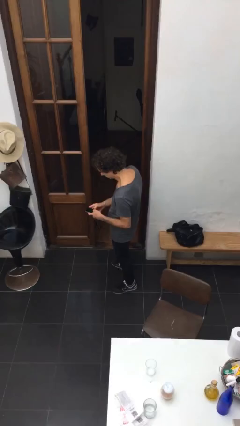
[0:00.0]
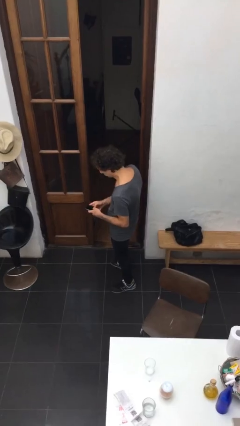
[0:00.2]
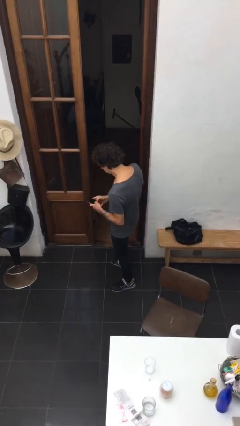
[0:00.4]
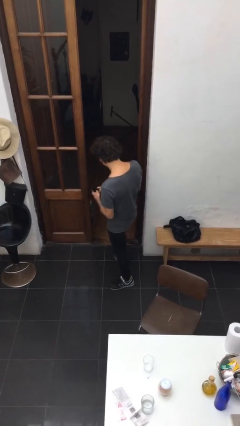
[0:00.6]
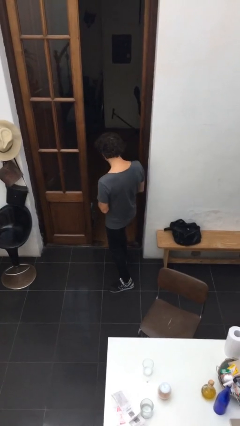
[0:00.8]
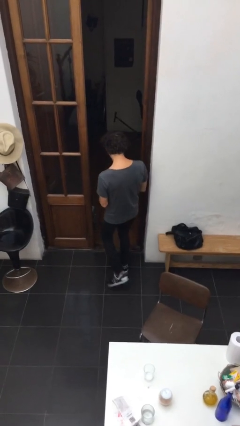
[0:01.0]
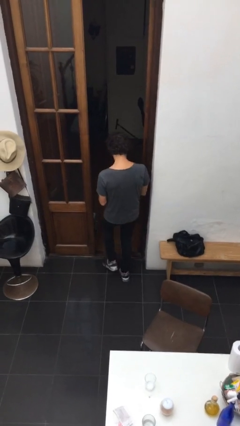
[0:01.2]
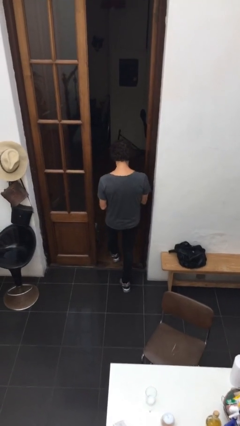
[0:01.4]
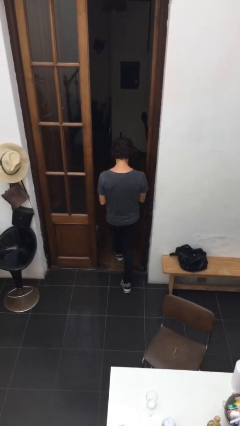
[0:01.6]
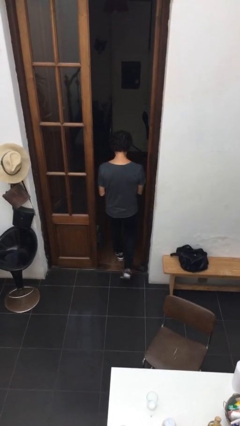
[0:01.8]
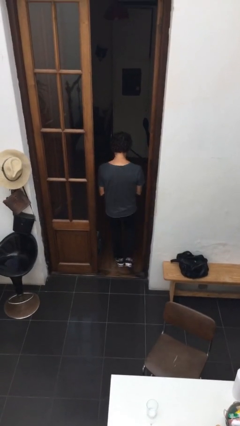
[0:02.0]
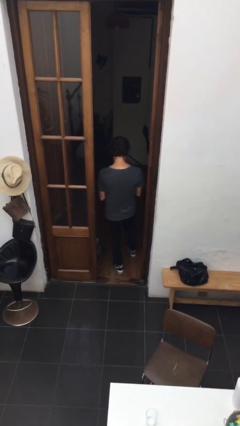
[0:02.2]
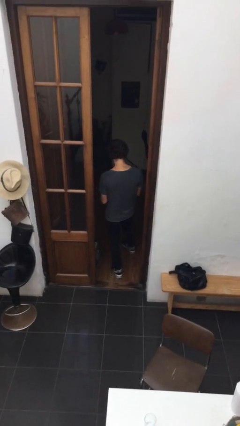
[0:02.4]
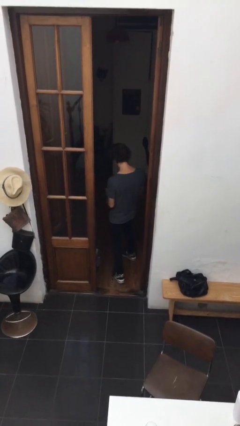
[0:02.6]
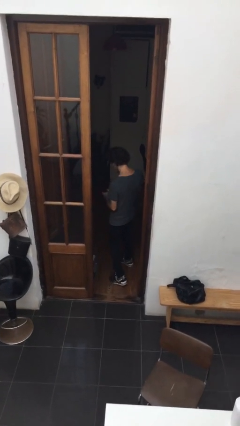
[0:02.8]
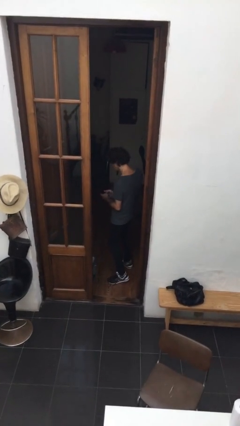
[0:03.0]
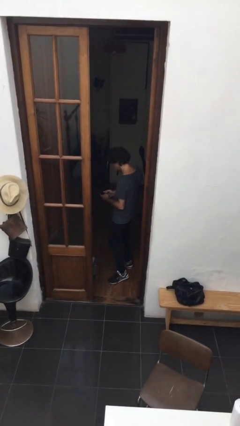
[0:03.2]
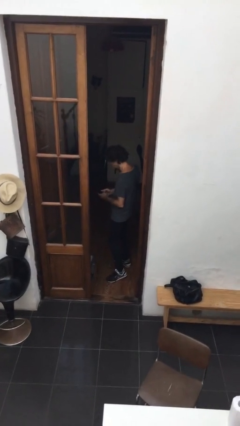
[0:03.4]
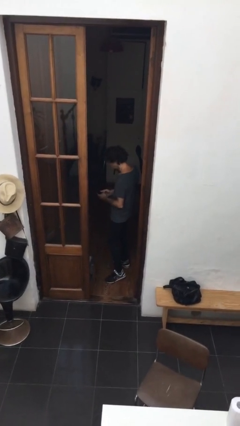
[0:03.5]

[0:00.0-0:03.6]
person exits scene through structure

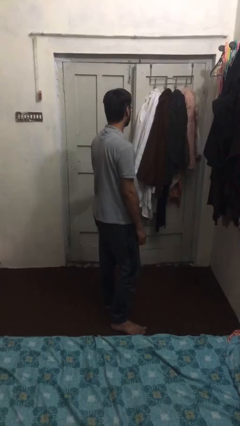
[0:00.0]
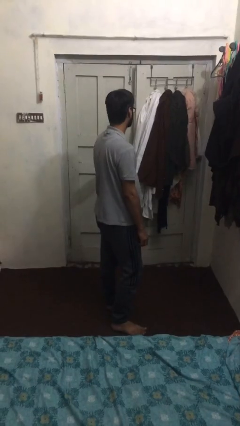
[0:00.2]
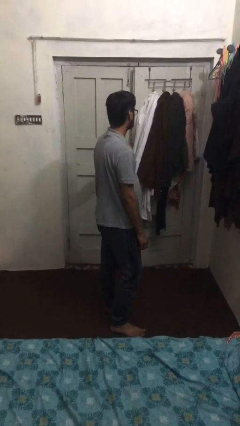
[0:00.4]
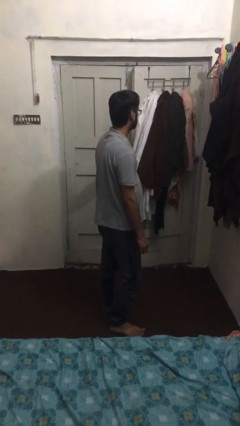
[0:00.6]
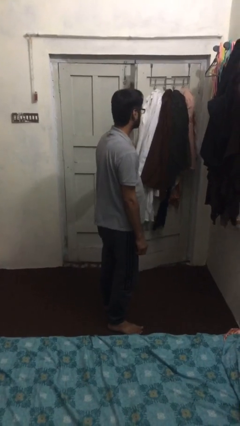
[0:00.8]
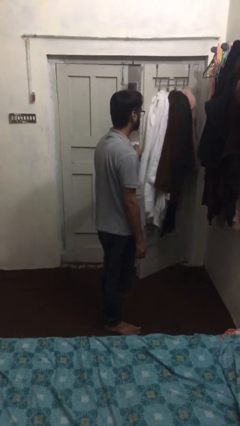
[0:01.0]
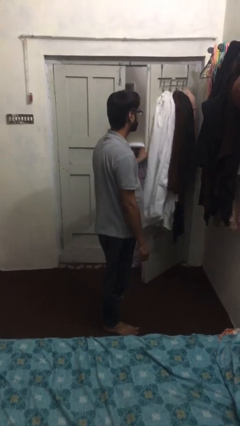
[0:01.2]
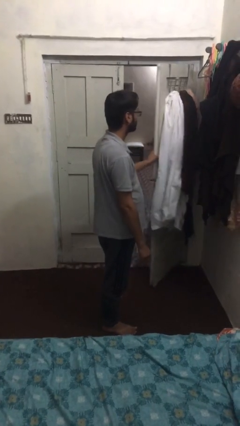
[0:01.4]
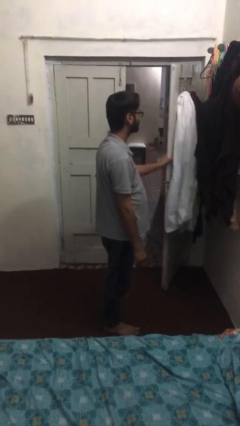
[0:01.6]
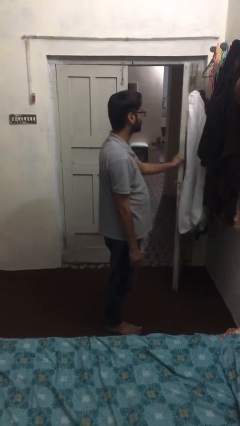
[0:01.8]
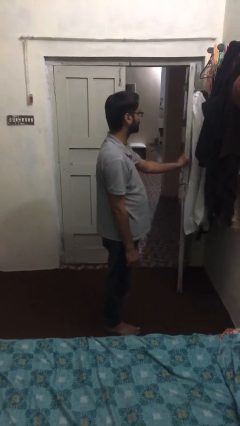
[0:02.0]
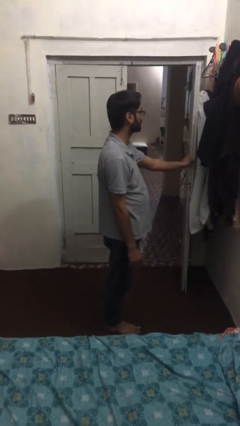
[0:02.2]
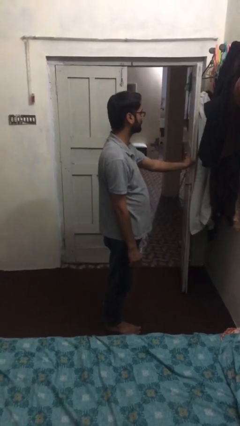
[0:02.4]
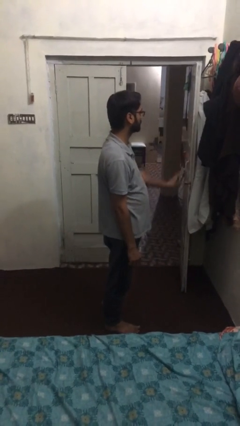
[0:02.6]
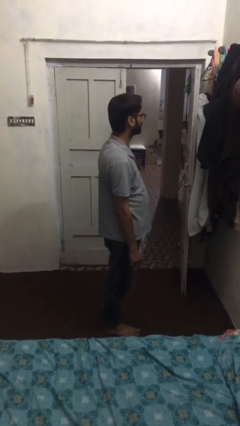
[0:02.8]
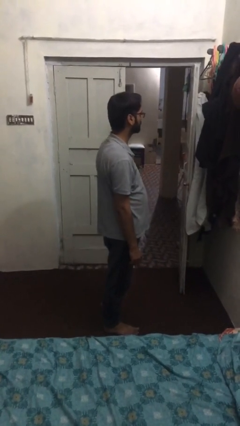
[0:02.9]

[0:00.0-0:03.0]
person opens facility door

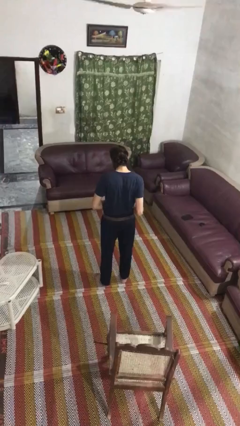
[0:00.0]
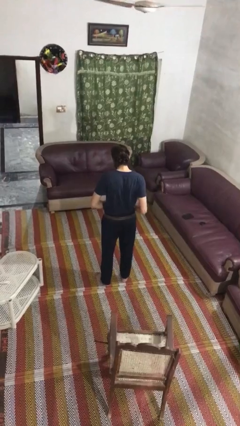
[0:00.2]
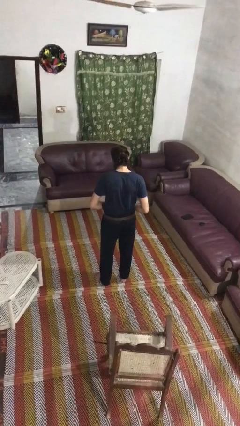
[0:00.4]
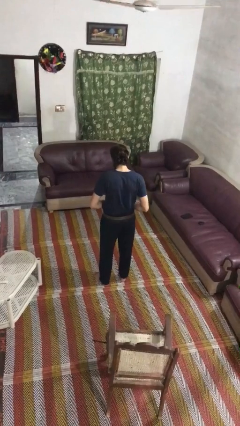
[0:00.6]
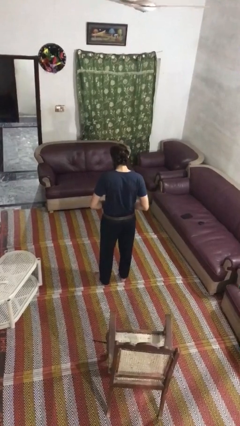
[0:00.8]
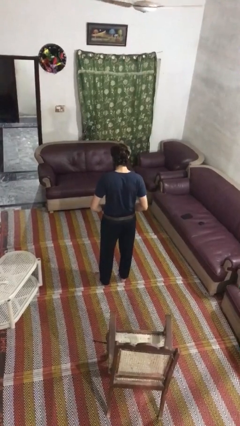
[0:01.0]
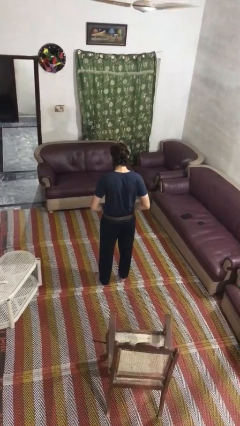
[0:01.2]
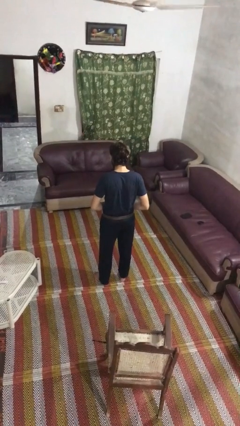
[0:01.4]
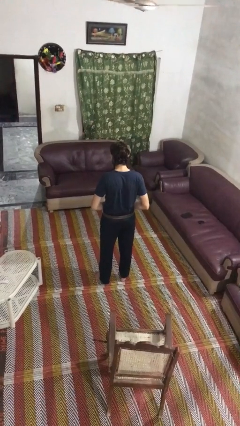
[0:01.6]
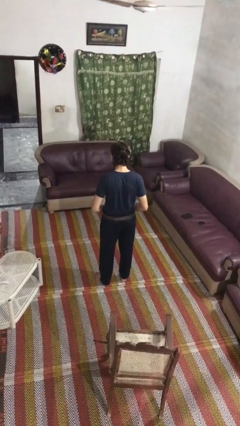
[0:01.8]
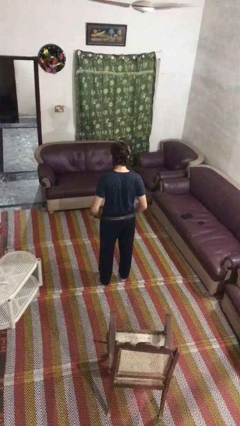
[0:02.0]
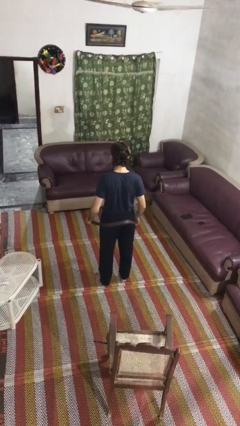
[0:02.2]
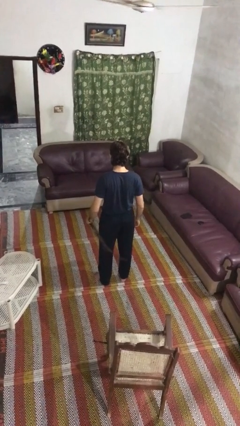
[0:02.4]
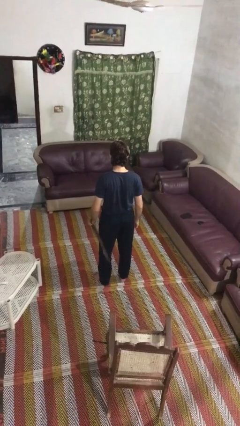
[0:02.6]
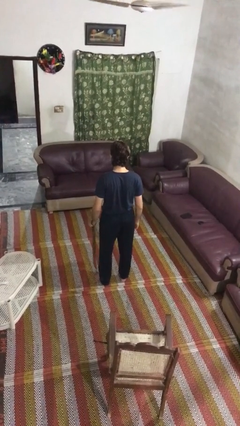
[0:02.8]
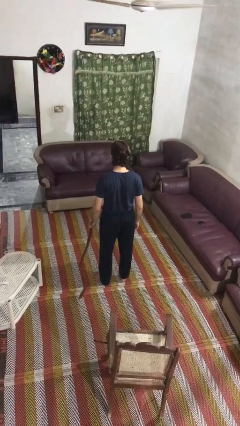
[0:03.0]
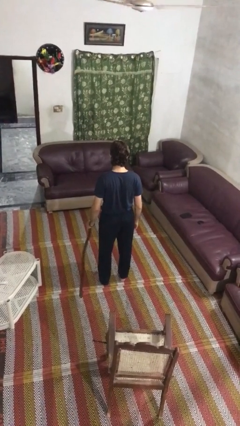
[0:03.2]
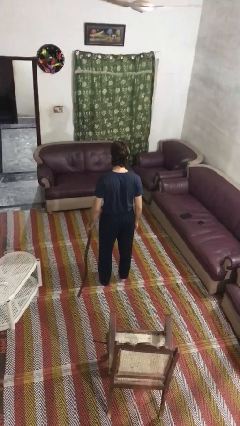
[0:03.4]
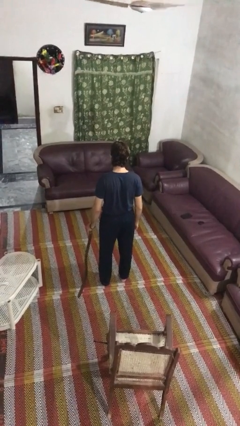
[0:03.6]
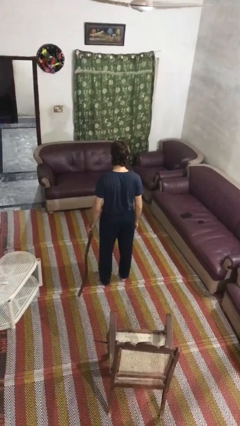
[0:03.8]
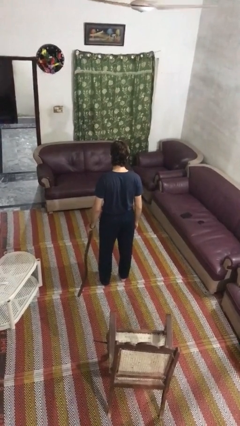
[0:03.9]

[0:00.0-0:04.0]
person takes off belt

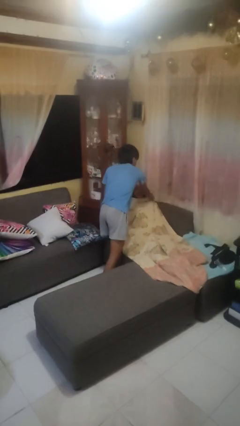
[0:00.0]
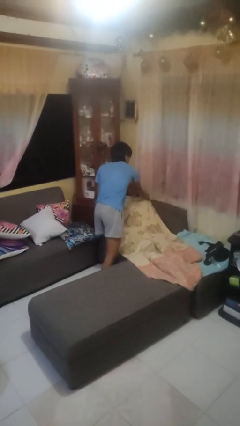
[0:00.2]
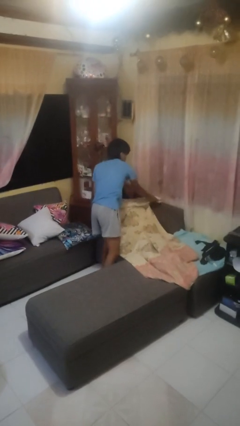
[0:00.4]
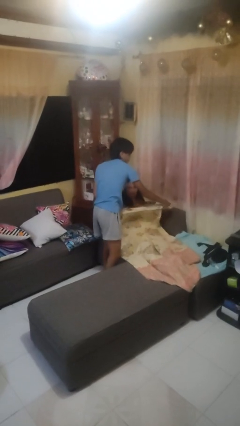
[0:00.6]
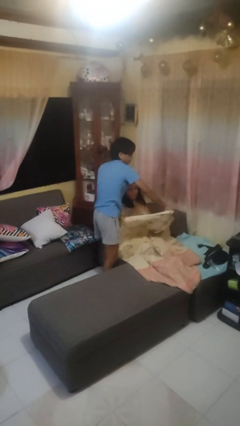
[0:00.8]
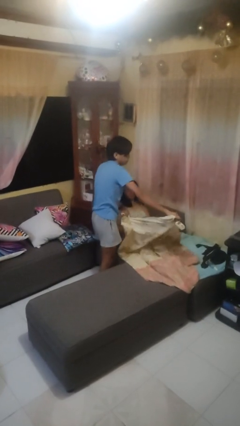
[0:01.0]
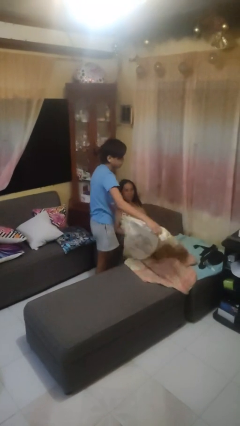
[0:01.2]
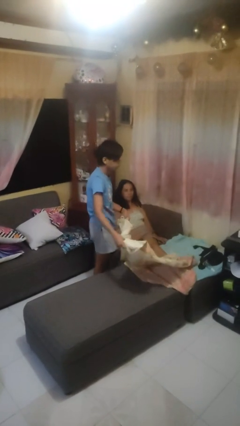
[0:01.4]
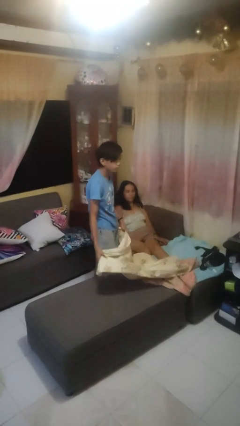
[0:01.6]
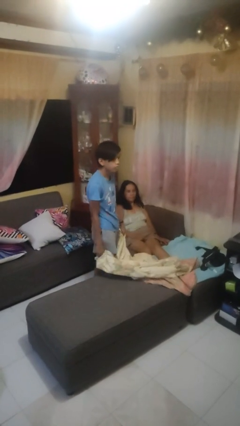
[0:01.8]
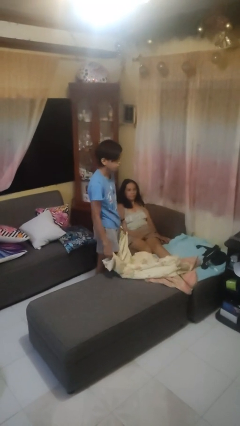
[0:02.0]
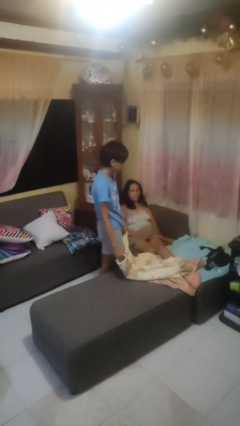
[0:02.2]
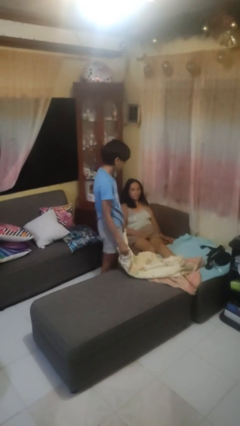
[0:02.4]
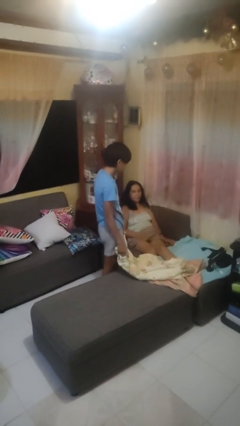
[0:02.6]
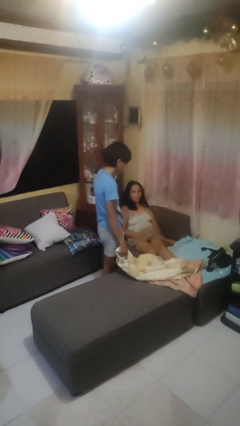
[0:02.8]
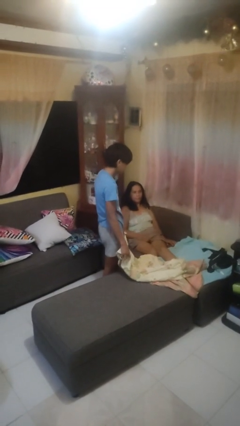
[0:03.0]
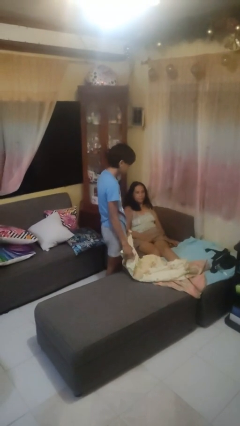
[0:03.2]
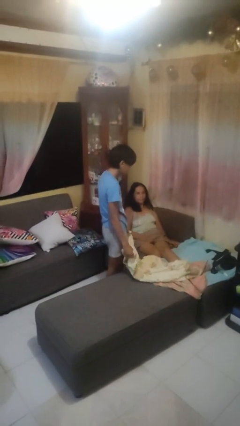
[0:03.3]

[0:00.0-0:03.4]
person uncovers friend with blanket

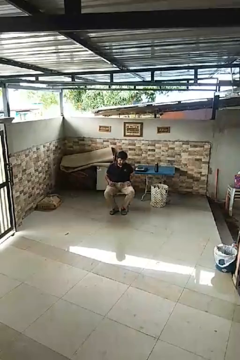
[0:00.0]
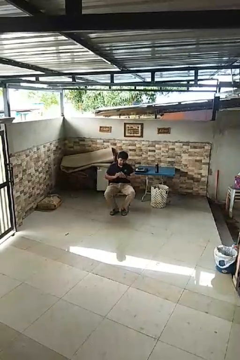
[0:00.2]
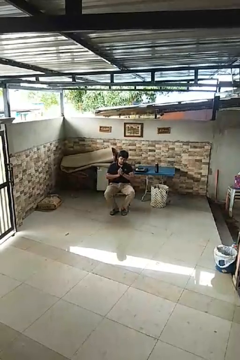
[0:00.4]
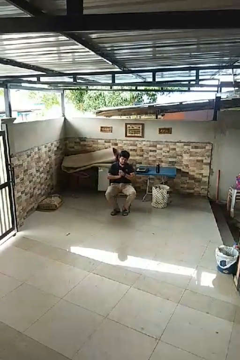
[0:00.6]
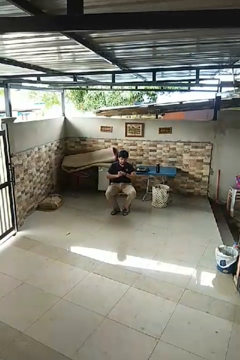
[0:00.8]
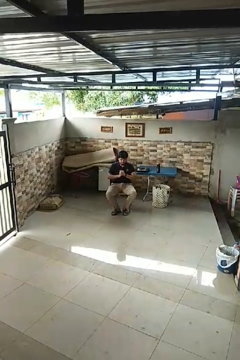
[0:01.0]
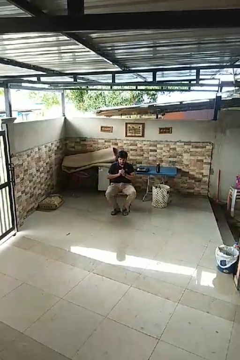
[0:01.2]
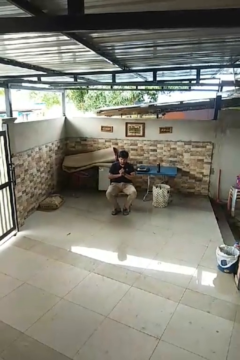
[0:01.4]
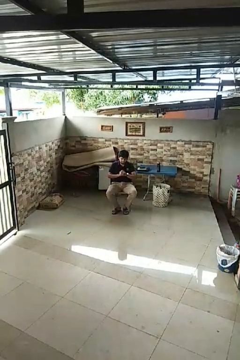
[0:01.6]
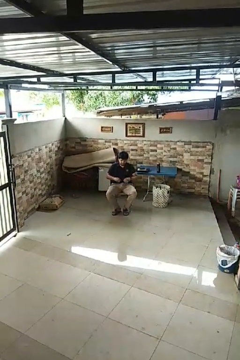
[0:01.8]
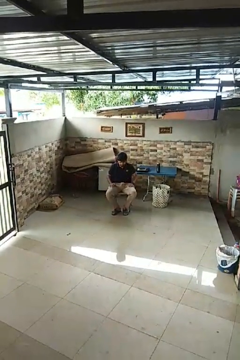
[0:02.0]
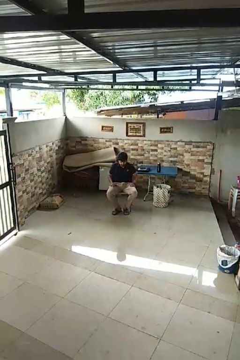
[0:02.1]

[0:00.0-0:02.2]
person cracks knuckles

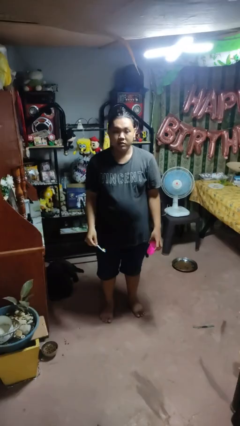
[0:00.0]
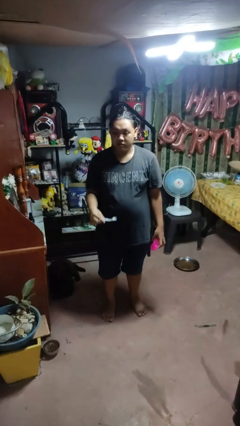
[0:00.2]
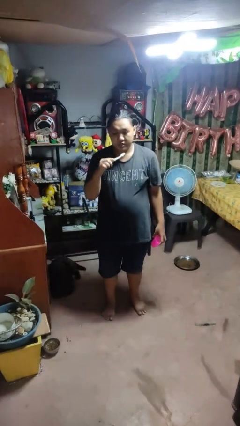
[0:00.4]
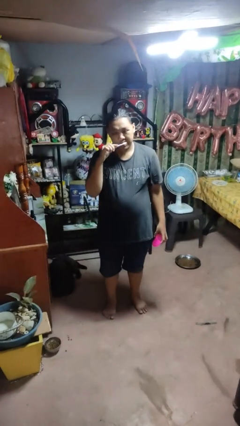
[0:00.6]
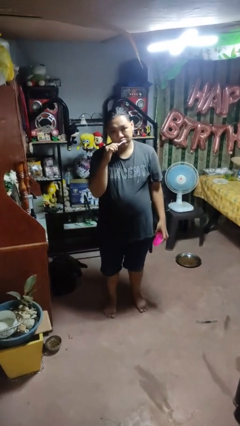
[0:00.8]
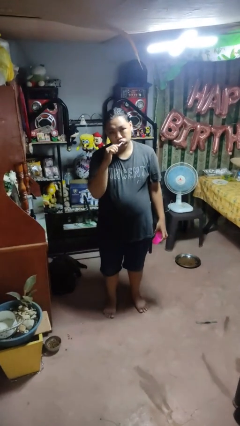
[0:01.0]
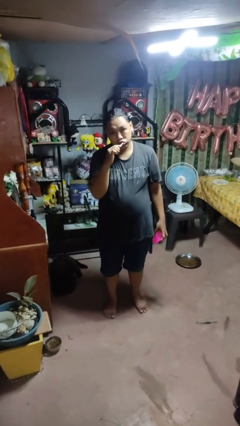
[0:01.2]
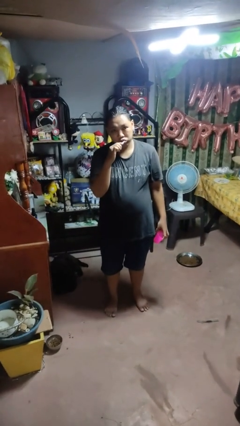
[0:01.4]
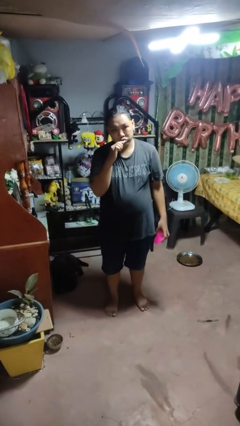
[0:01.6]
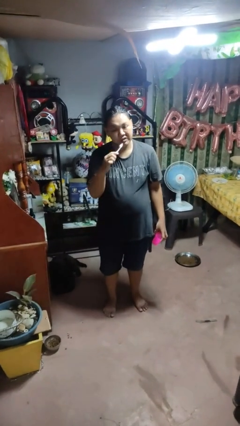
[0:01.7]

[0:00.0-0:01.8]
person brushes teeth
